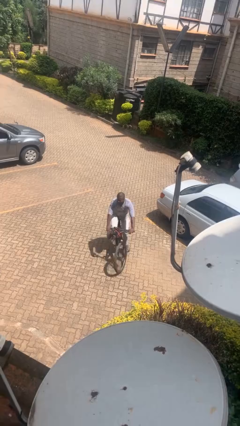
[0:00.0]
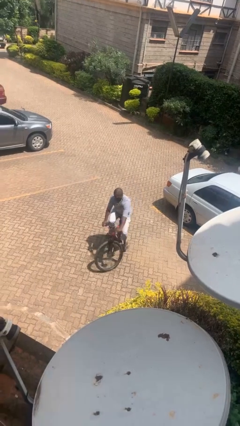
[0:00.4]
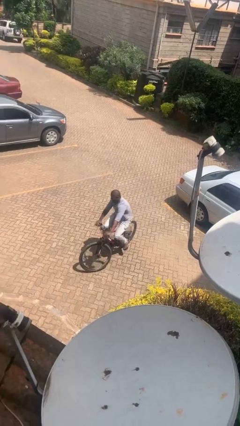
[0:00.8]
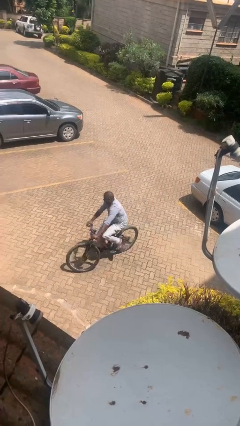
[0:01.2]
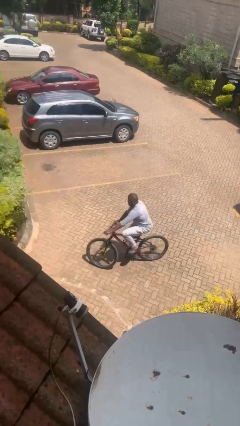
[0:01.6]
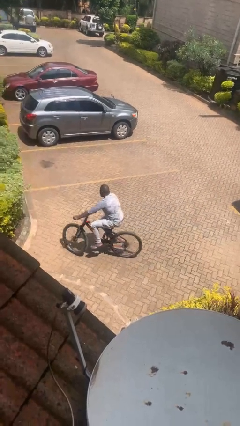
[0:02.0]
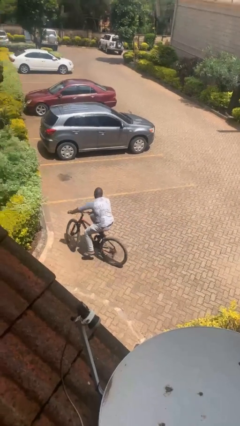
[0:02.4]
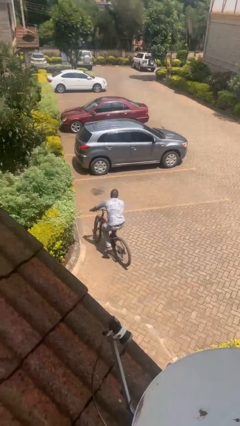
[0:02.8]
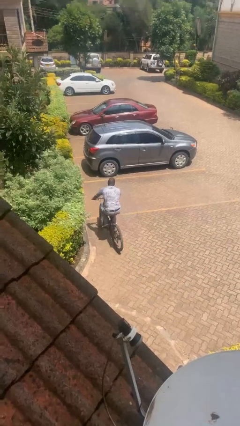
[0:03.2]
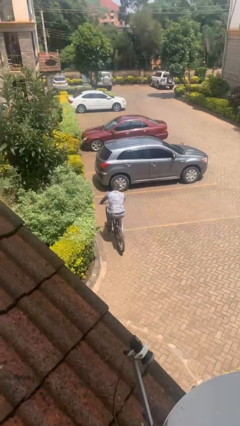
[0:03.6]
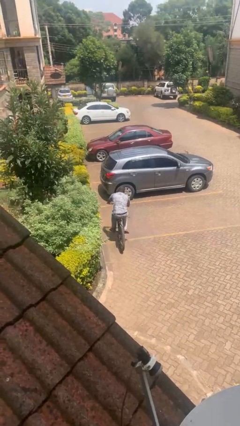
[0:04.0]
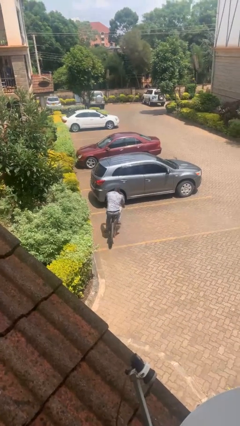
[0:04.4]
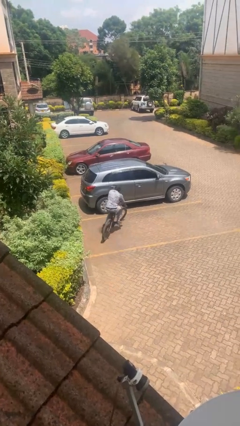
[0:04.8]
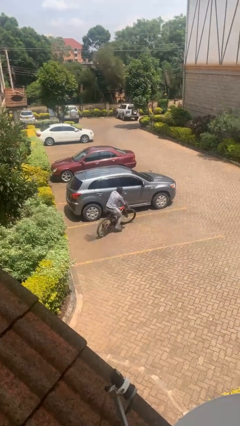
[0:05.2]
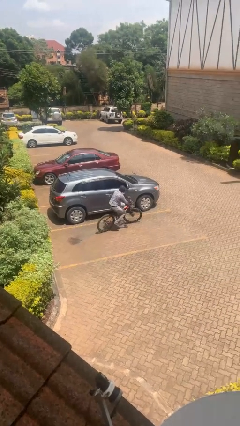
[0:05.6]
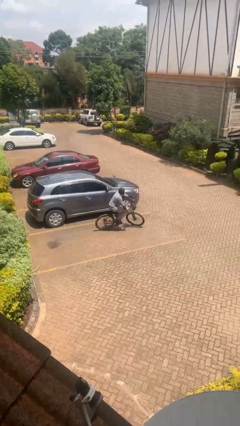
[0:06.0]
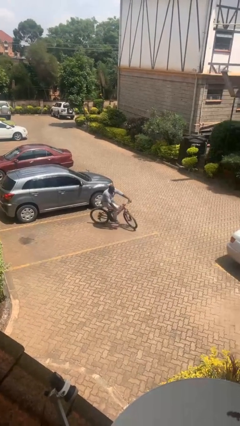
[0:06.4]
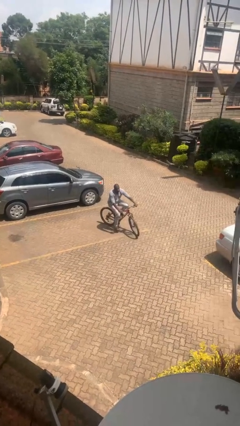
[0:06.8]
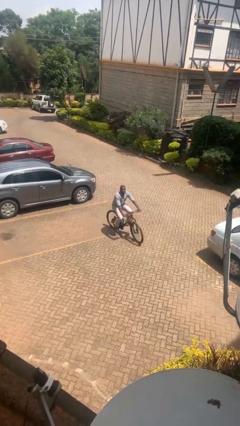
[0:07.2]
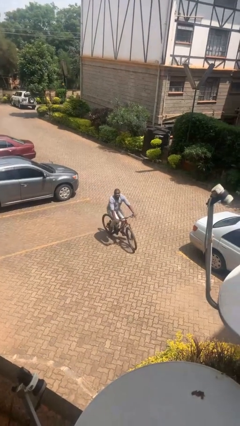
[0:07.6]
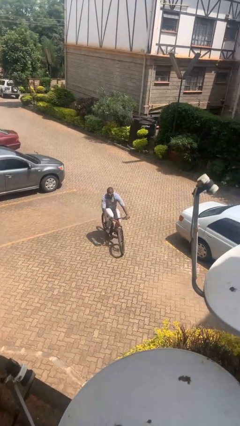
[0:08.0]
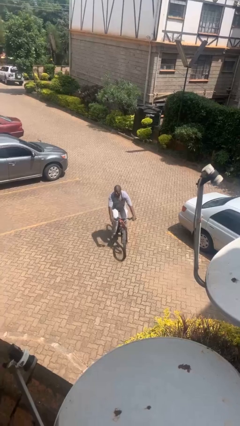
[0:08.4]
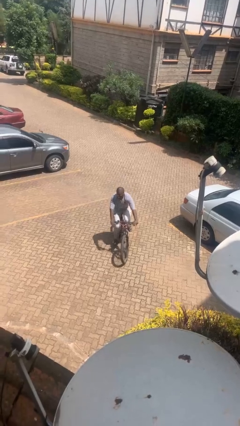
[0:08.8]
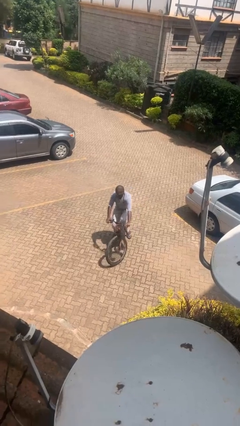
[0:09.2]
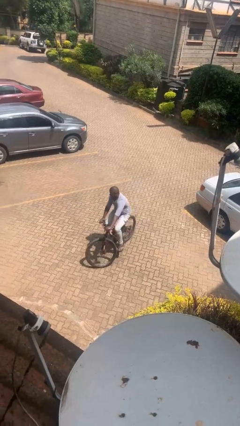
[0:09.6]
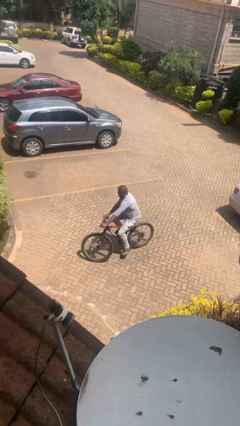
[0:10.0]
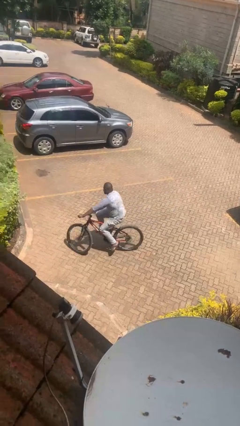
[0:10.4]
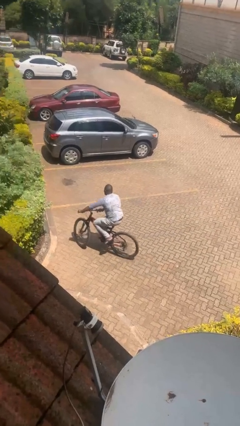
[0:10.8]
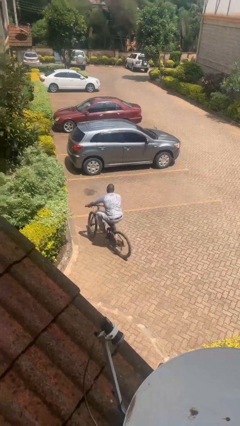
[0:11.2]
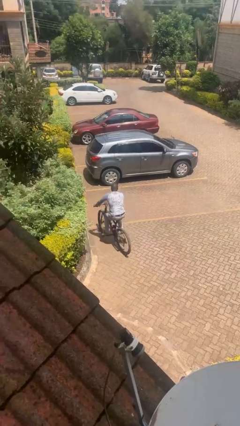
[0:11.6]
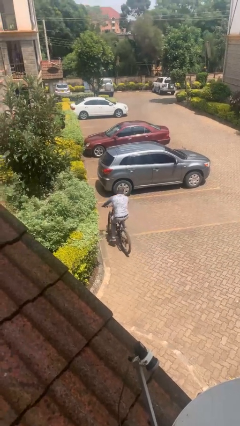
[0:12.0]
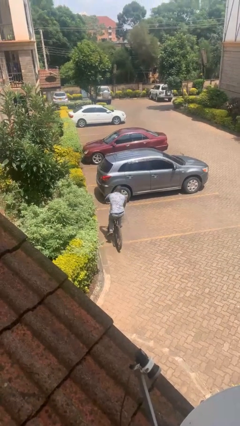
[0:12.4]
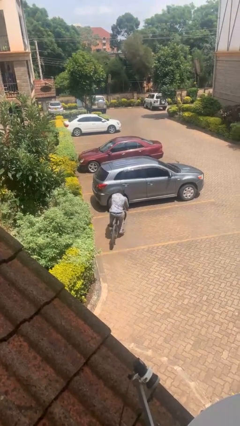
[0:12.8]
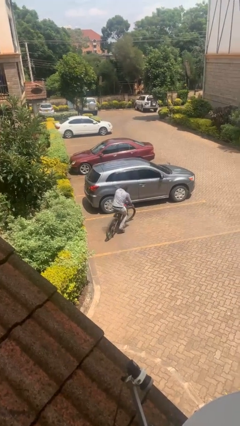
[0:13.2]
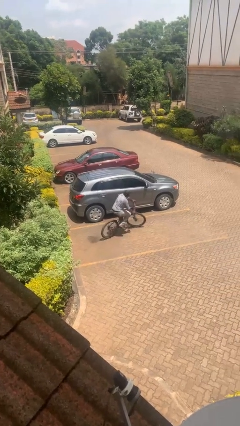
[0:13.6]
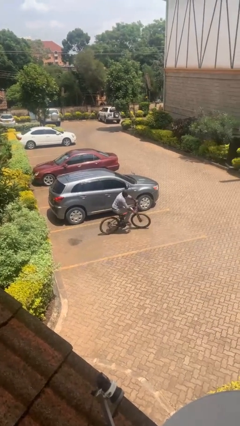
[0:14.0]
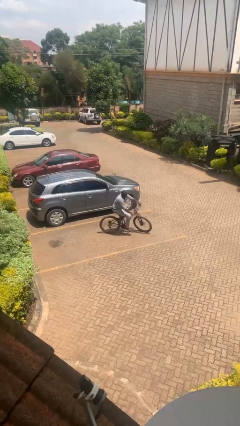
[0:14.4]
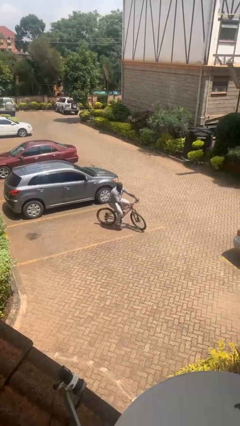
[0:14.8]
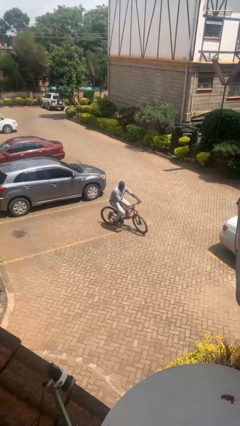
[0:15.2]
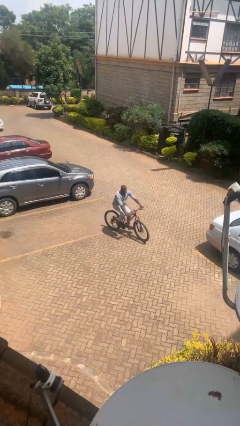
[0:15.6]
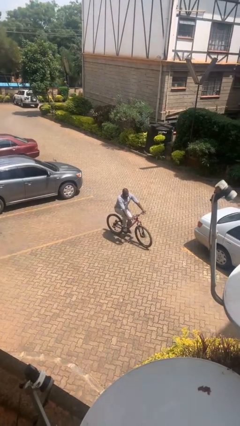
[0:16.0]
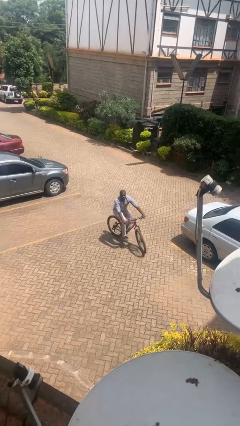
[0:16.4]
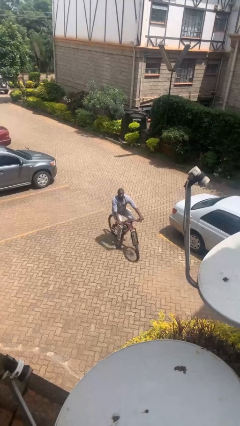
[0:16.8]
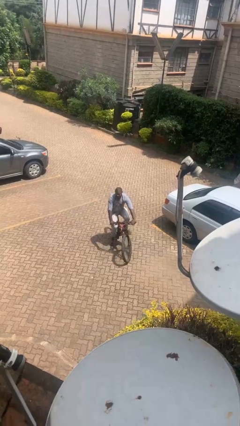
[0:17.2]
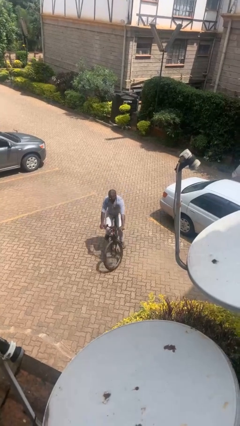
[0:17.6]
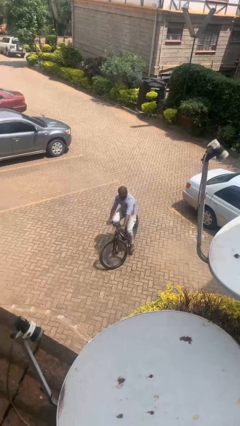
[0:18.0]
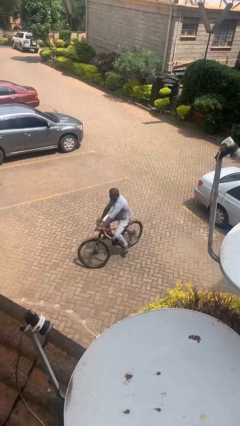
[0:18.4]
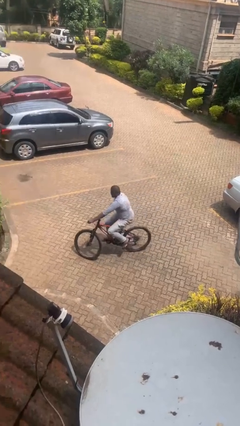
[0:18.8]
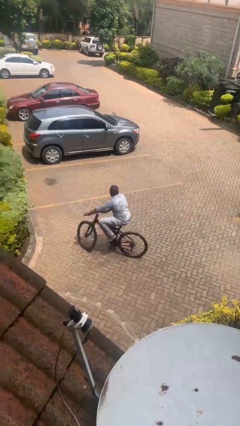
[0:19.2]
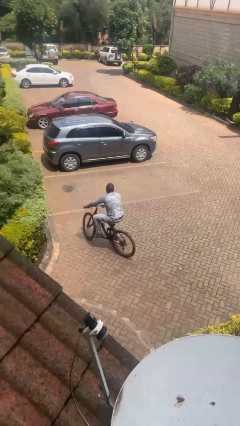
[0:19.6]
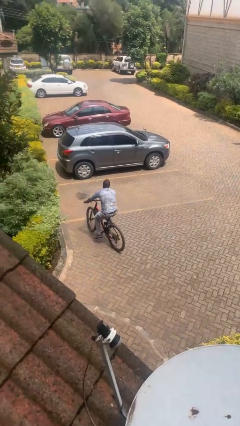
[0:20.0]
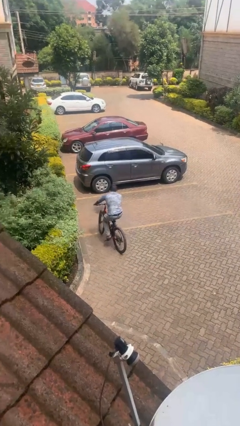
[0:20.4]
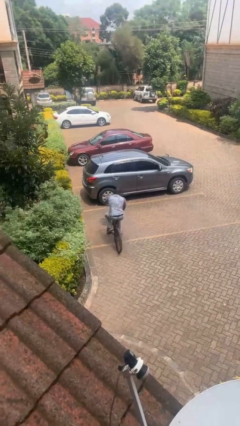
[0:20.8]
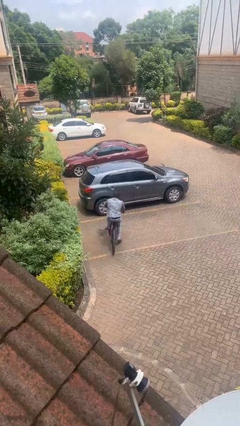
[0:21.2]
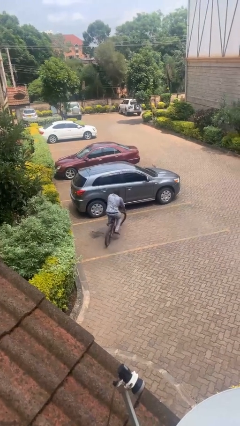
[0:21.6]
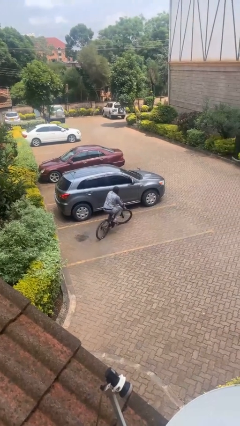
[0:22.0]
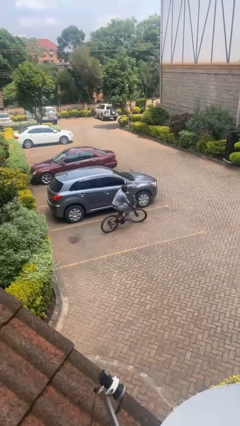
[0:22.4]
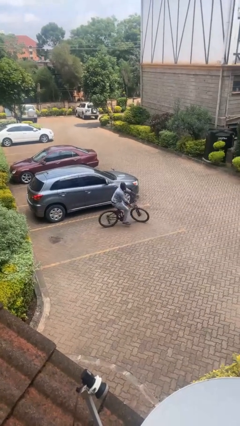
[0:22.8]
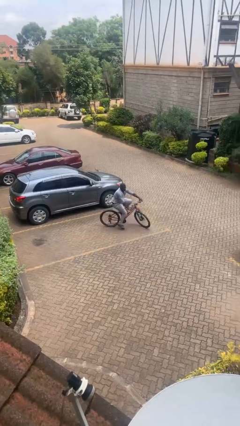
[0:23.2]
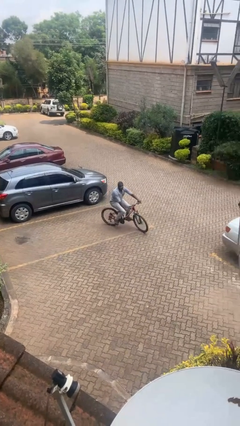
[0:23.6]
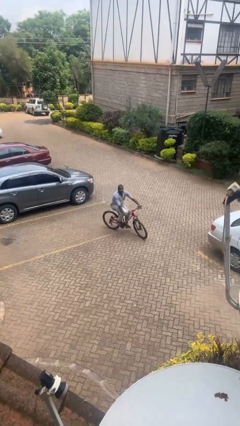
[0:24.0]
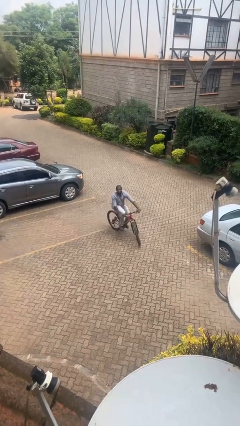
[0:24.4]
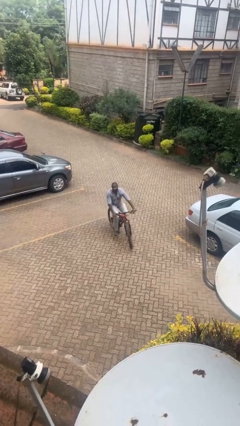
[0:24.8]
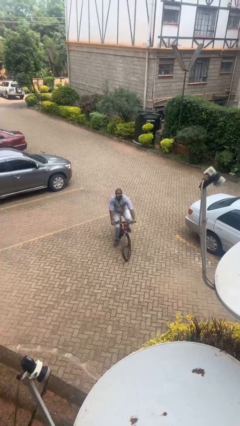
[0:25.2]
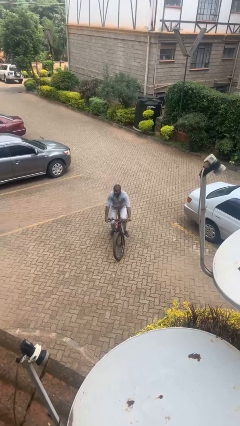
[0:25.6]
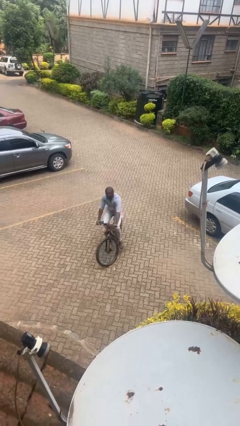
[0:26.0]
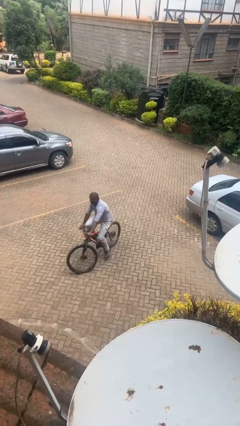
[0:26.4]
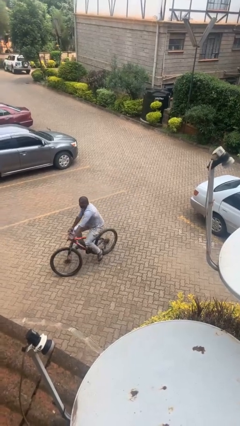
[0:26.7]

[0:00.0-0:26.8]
person rides bicycle

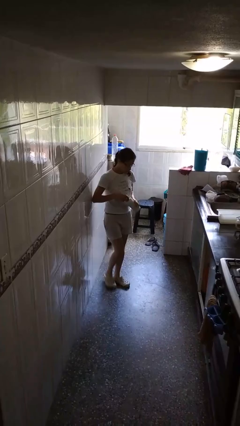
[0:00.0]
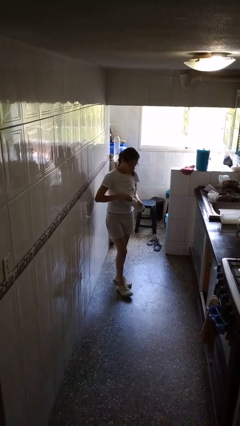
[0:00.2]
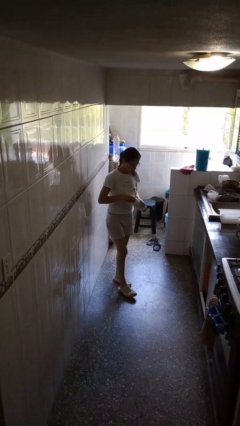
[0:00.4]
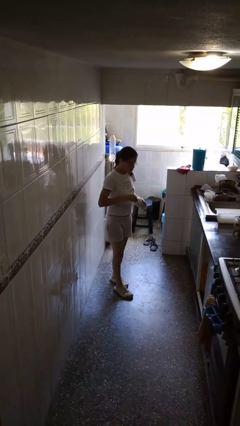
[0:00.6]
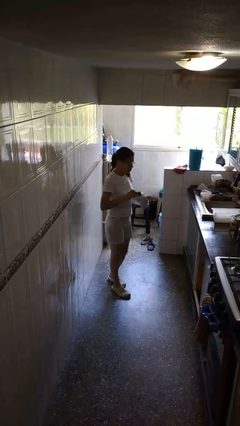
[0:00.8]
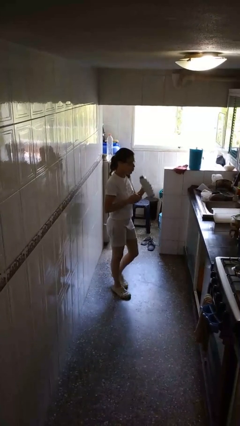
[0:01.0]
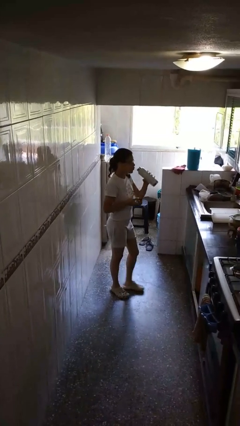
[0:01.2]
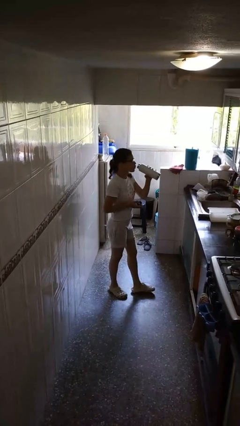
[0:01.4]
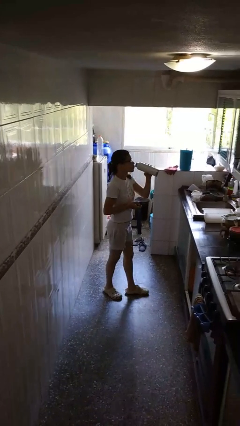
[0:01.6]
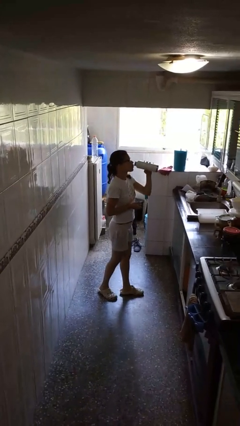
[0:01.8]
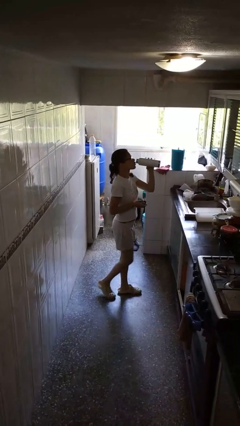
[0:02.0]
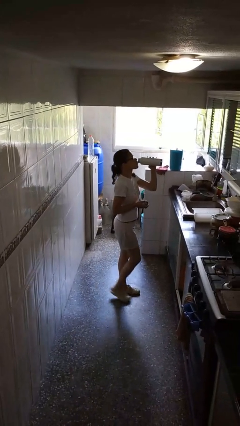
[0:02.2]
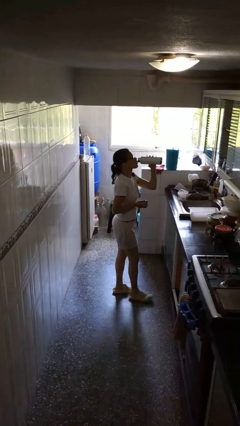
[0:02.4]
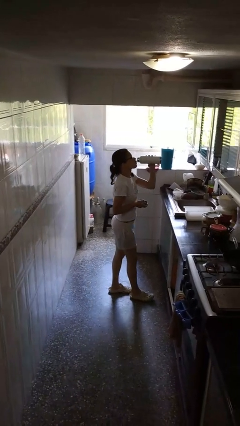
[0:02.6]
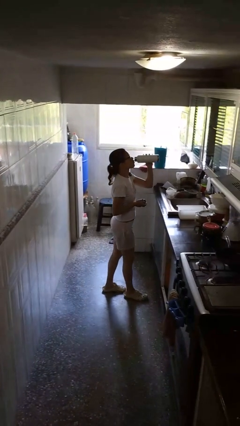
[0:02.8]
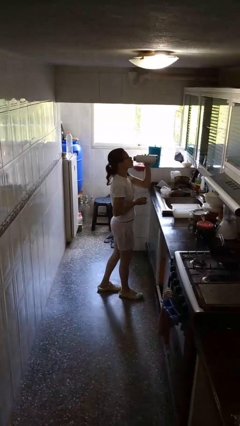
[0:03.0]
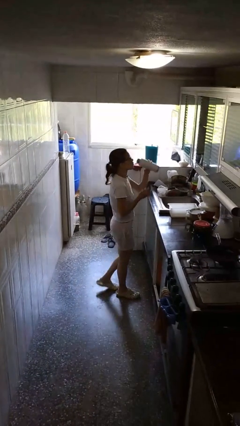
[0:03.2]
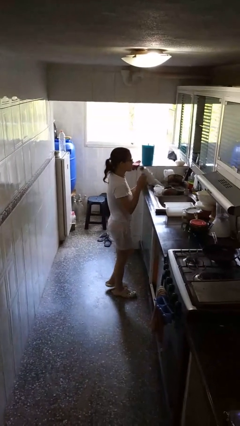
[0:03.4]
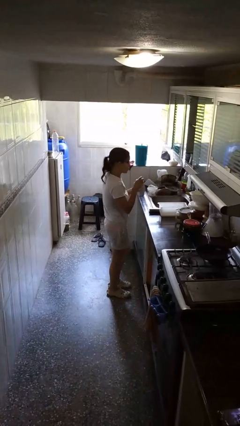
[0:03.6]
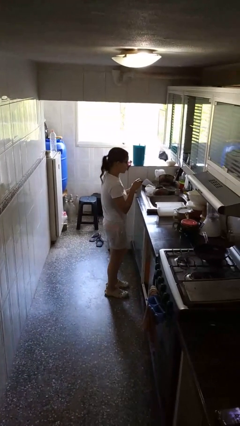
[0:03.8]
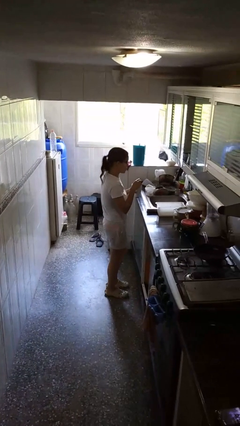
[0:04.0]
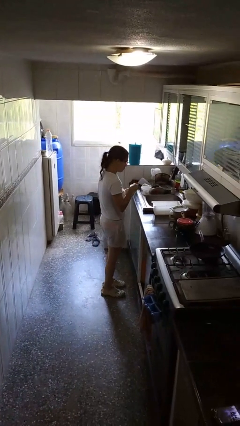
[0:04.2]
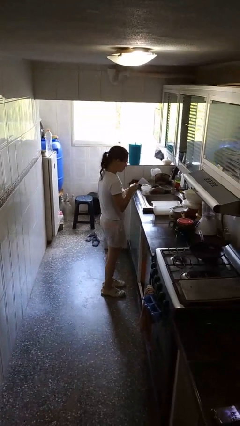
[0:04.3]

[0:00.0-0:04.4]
person drinks from bottle

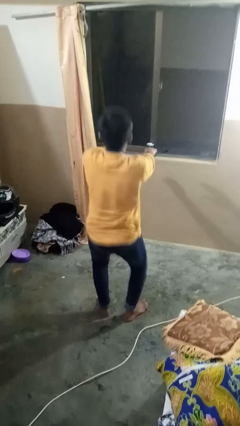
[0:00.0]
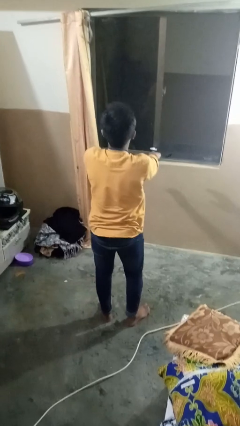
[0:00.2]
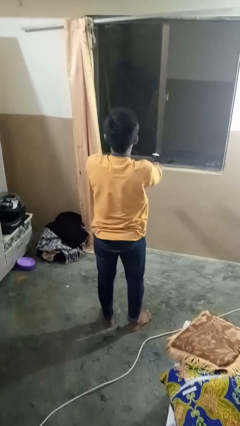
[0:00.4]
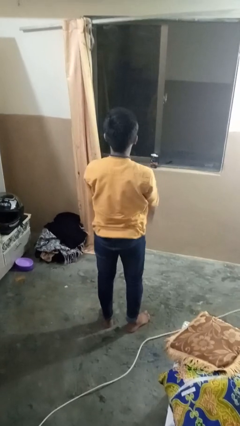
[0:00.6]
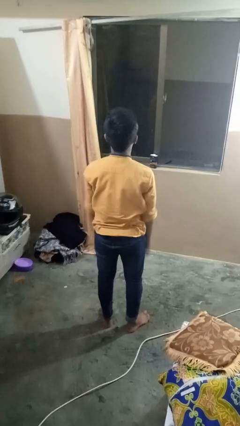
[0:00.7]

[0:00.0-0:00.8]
person stands up
